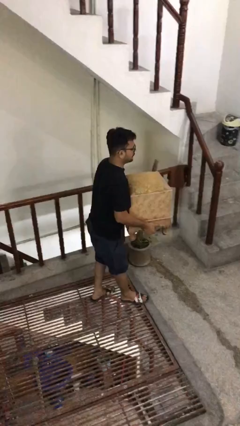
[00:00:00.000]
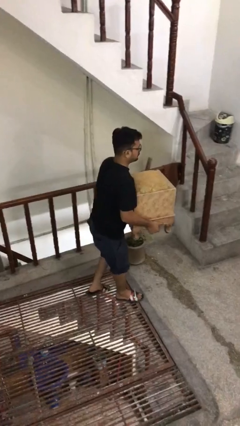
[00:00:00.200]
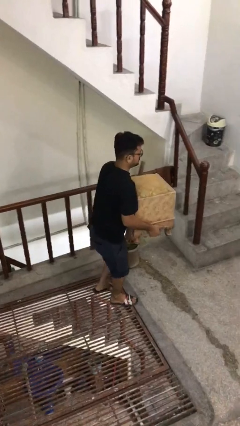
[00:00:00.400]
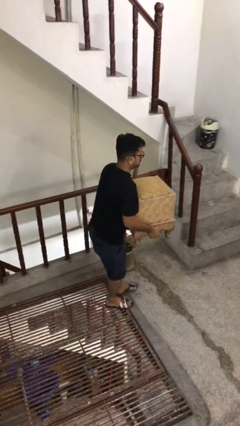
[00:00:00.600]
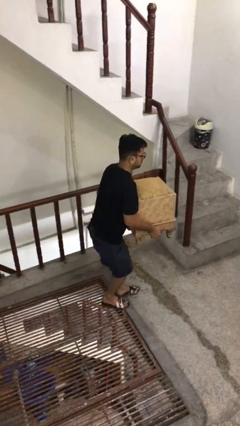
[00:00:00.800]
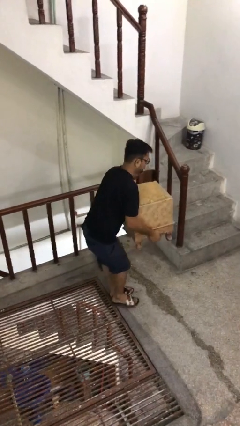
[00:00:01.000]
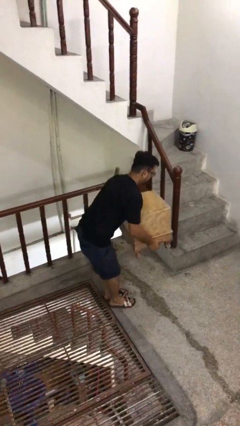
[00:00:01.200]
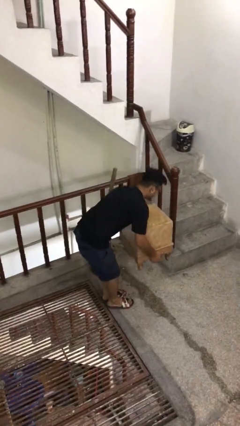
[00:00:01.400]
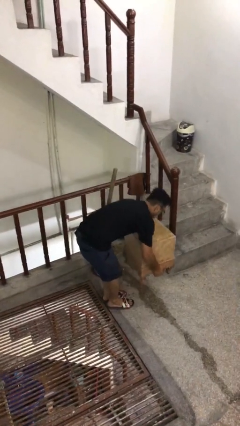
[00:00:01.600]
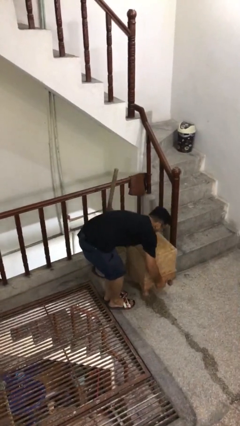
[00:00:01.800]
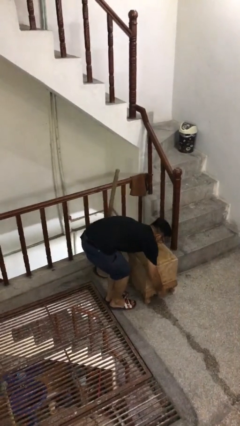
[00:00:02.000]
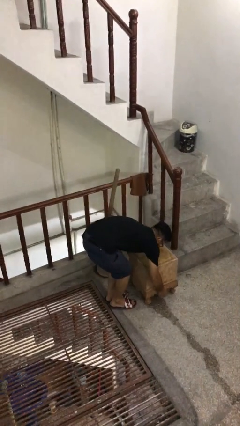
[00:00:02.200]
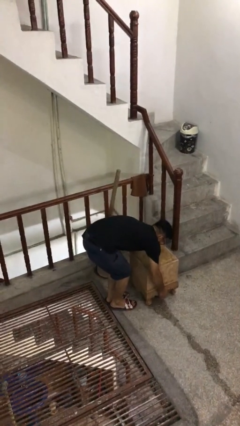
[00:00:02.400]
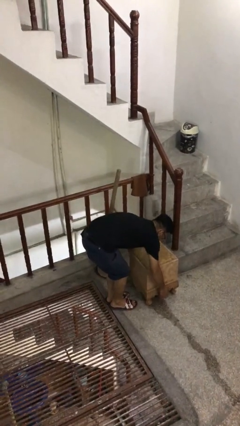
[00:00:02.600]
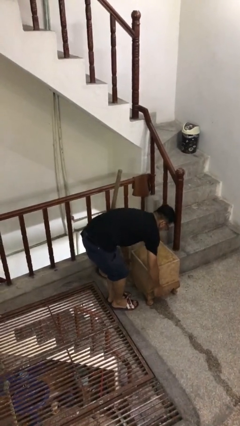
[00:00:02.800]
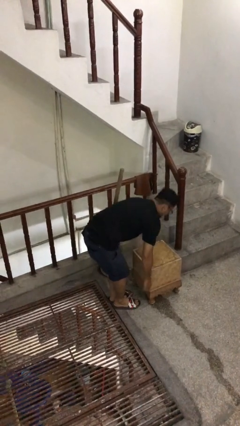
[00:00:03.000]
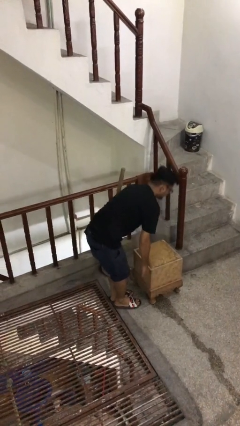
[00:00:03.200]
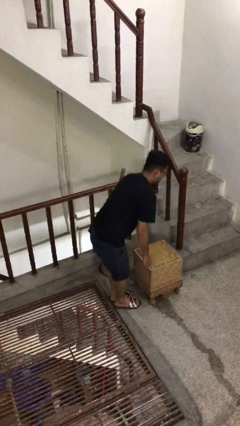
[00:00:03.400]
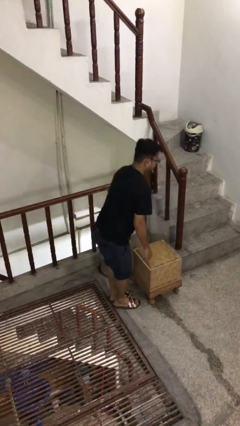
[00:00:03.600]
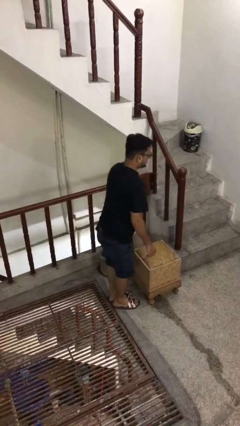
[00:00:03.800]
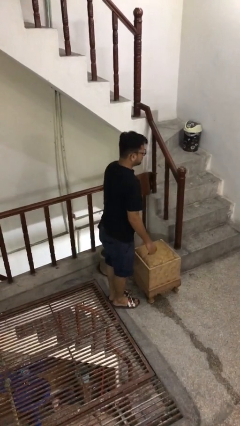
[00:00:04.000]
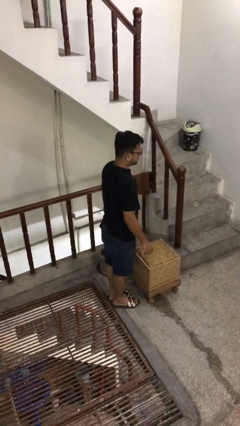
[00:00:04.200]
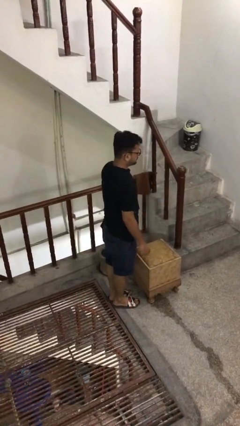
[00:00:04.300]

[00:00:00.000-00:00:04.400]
person puts down object on floor

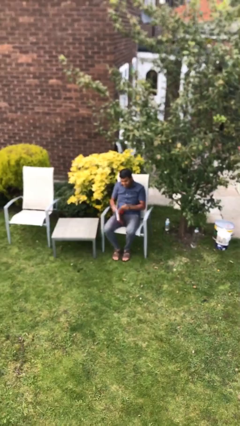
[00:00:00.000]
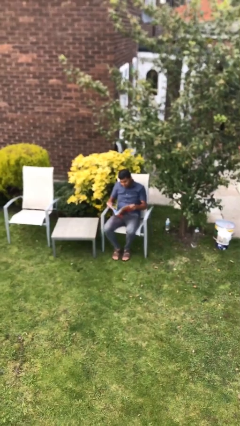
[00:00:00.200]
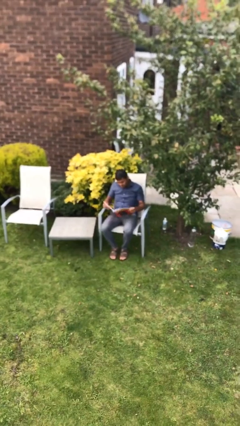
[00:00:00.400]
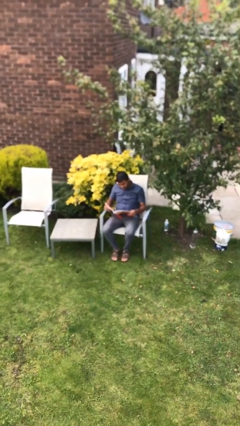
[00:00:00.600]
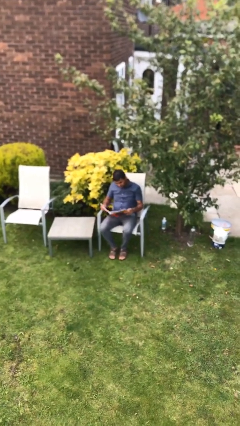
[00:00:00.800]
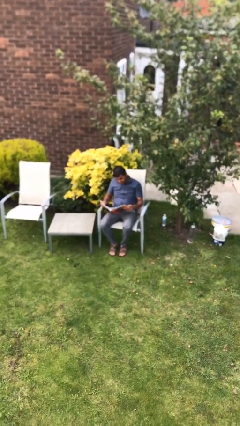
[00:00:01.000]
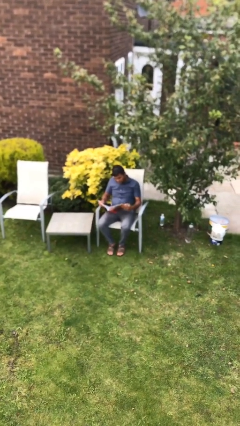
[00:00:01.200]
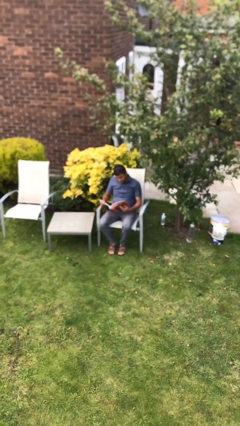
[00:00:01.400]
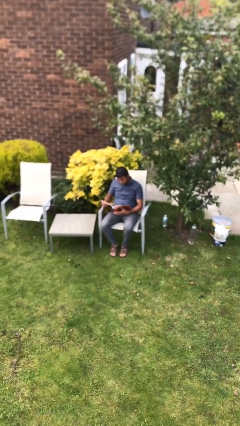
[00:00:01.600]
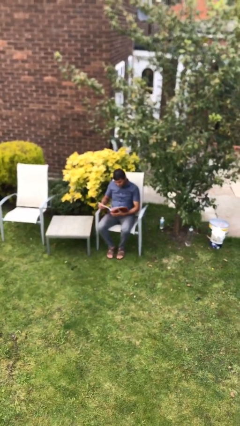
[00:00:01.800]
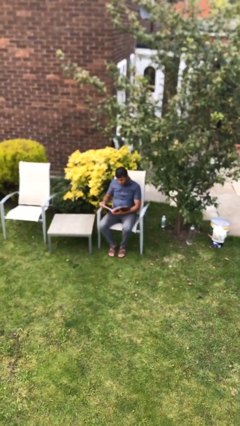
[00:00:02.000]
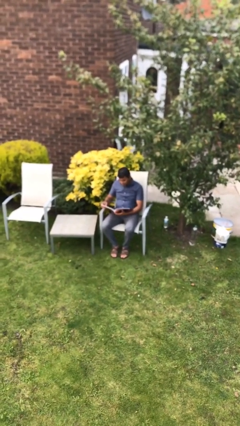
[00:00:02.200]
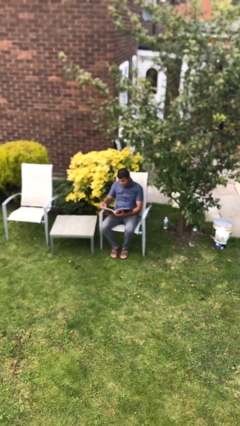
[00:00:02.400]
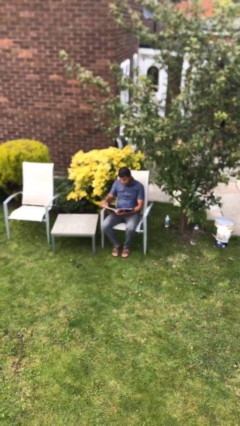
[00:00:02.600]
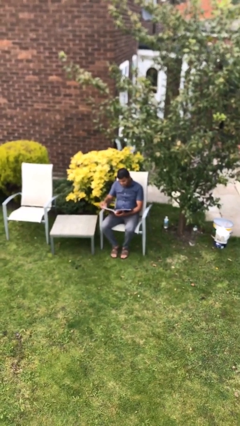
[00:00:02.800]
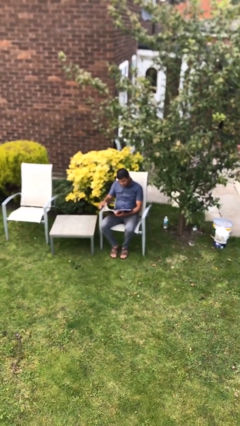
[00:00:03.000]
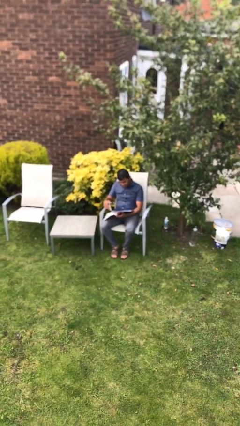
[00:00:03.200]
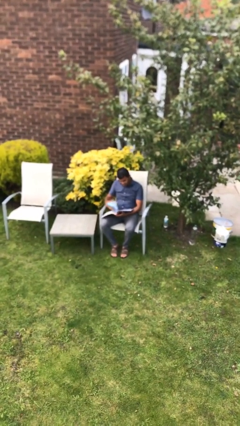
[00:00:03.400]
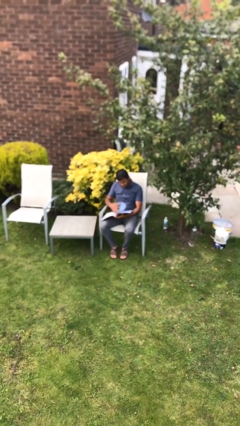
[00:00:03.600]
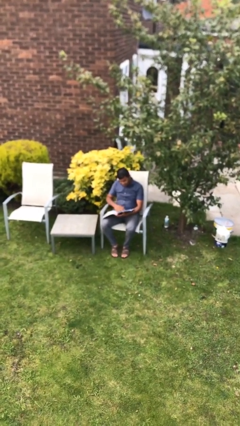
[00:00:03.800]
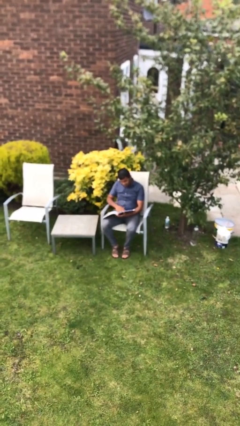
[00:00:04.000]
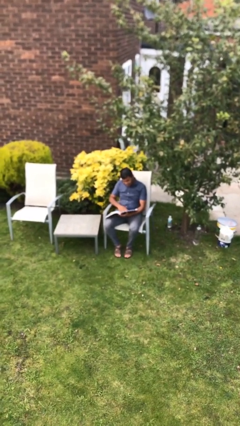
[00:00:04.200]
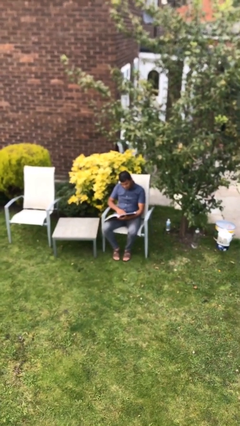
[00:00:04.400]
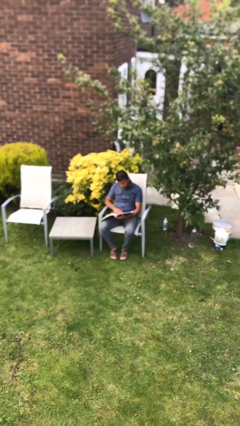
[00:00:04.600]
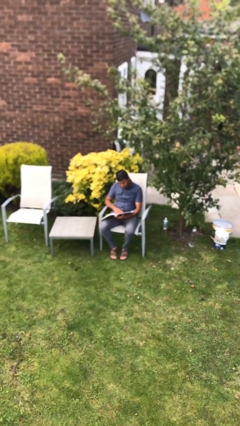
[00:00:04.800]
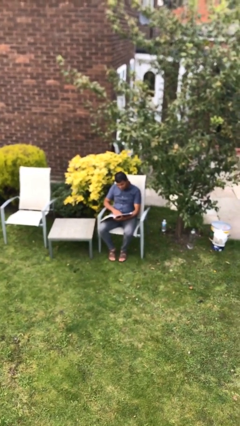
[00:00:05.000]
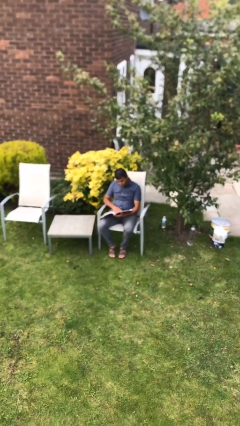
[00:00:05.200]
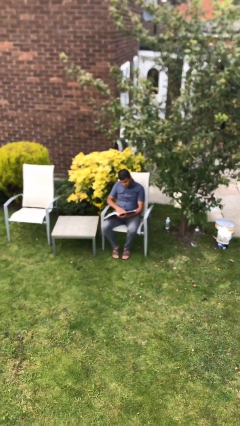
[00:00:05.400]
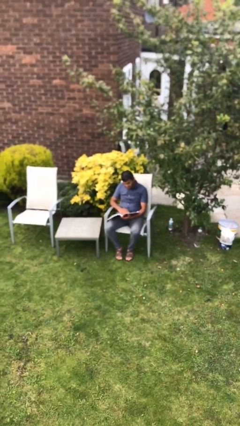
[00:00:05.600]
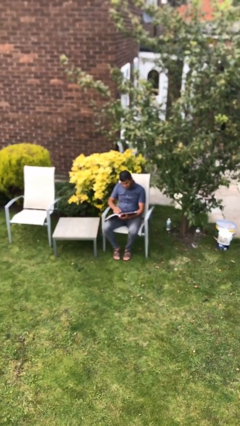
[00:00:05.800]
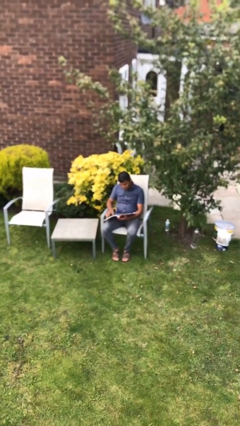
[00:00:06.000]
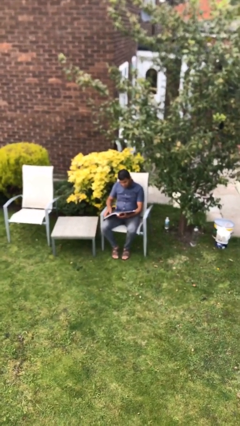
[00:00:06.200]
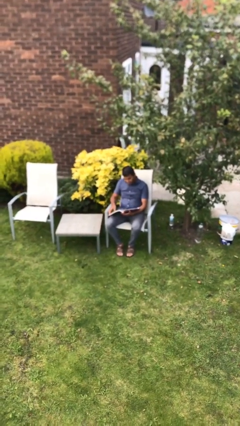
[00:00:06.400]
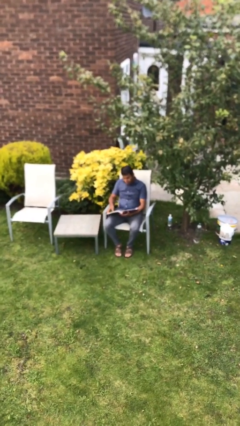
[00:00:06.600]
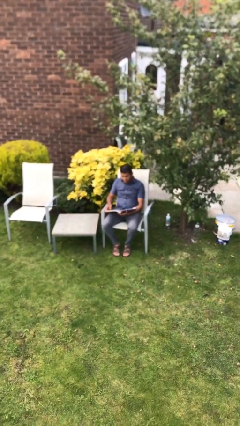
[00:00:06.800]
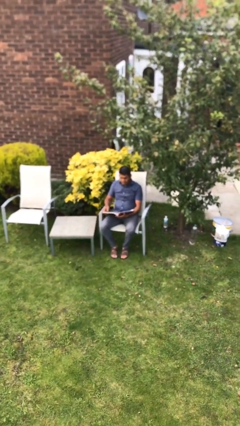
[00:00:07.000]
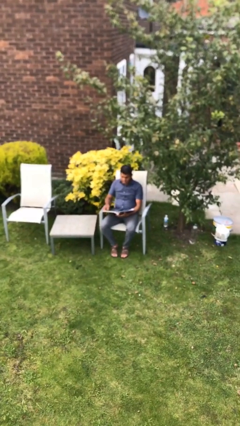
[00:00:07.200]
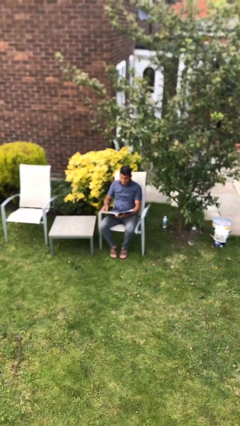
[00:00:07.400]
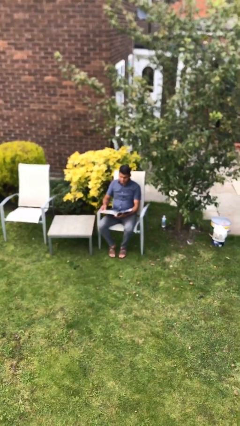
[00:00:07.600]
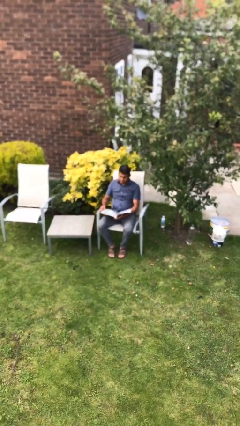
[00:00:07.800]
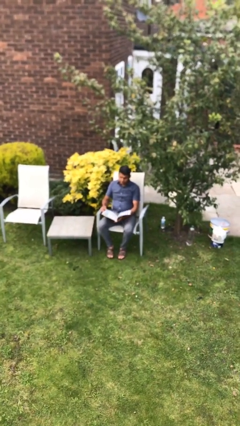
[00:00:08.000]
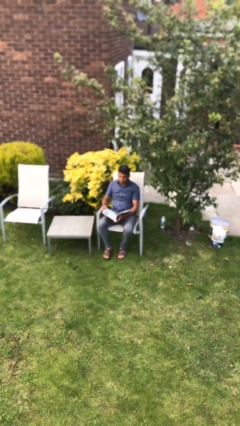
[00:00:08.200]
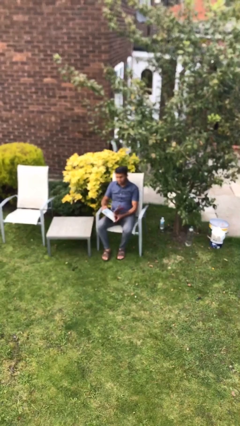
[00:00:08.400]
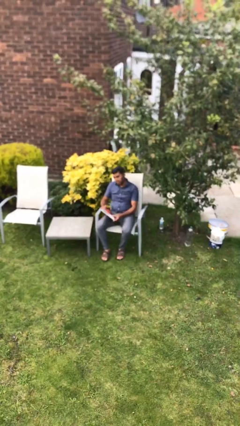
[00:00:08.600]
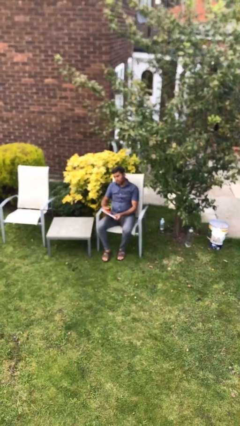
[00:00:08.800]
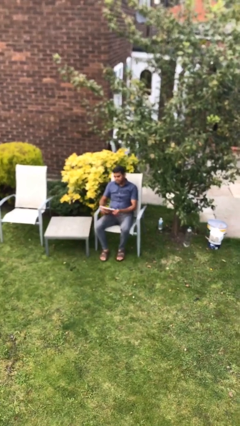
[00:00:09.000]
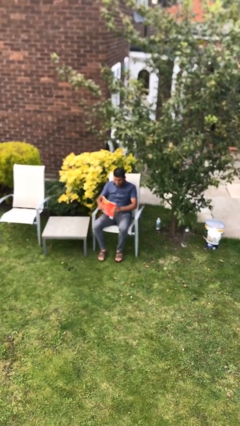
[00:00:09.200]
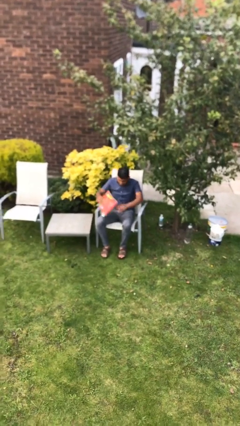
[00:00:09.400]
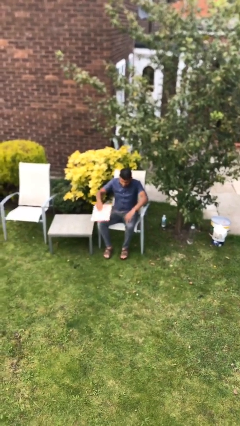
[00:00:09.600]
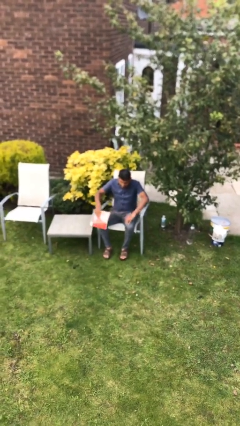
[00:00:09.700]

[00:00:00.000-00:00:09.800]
person reads document

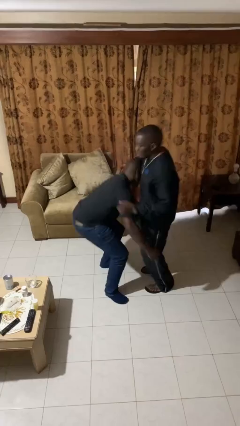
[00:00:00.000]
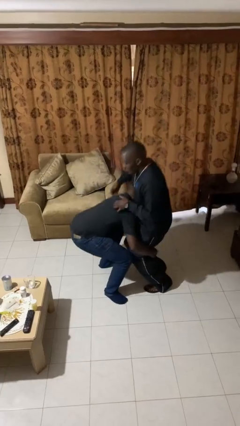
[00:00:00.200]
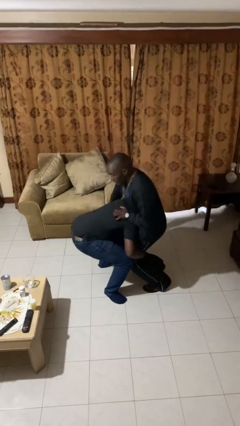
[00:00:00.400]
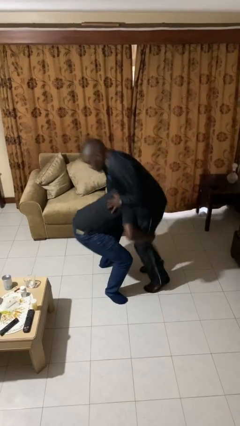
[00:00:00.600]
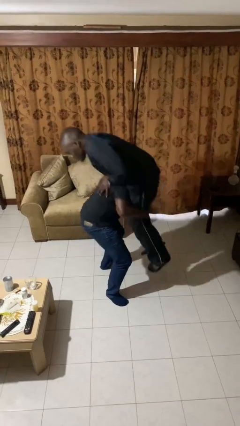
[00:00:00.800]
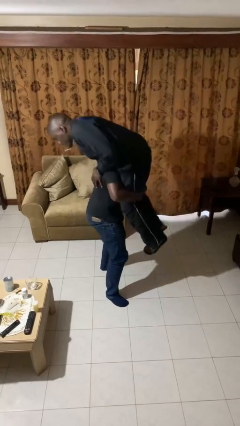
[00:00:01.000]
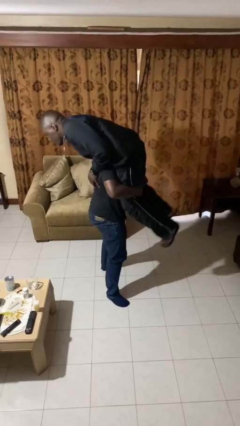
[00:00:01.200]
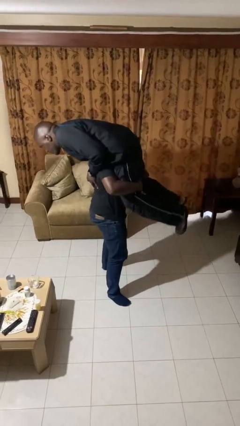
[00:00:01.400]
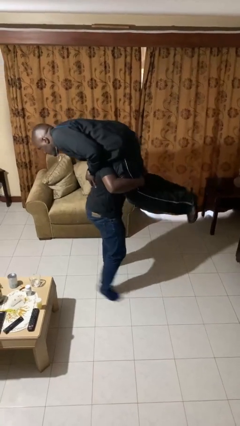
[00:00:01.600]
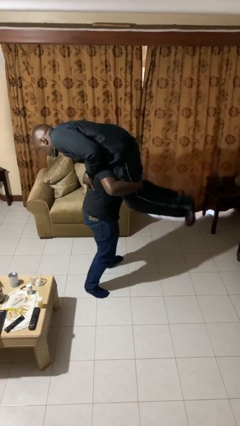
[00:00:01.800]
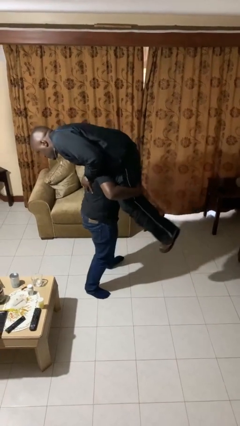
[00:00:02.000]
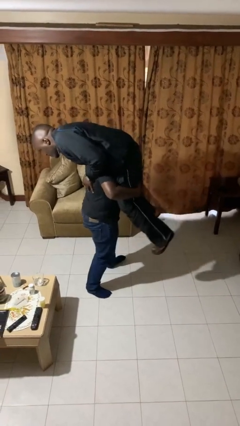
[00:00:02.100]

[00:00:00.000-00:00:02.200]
person carries person over shoulder

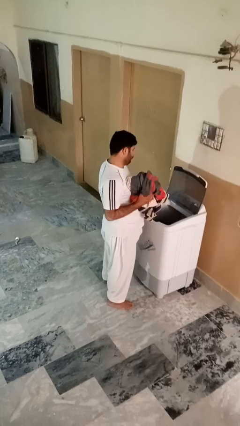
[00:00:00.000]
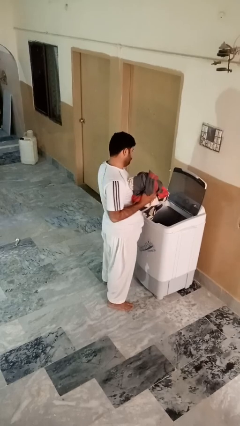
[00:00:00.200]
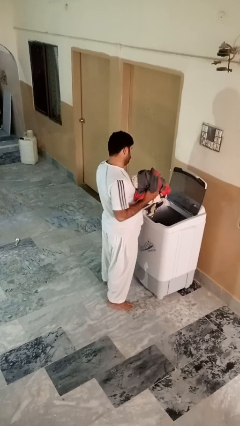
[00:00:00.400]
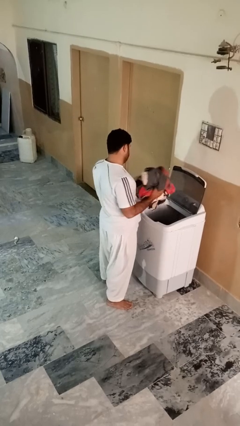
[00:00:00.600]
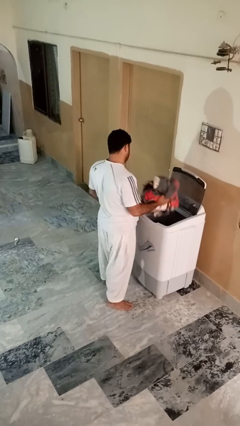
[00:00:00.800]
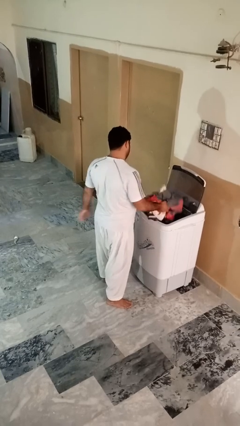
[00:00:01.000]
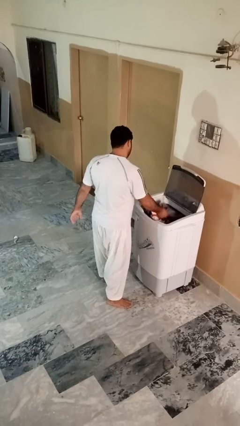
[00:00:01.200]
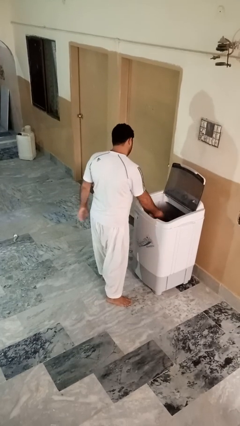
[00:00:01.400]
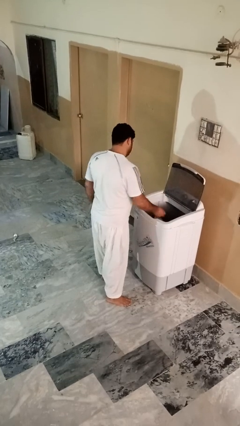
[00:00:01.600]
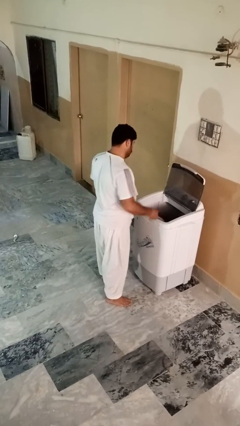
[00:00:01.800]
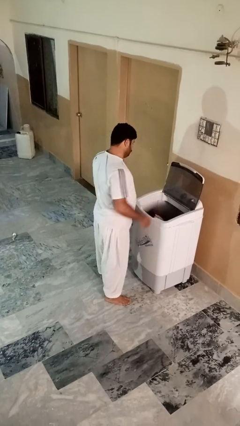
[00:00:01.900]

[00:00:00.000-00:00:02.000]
person loads clotheswasher
